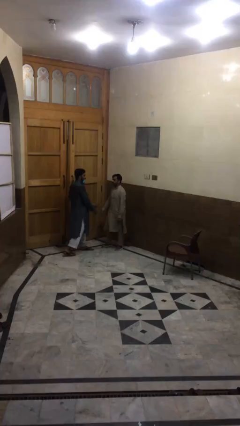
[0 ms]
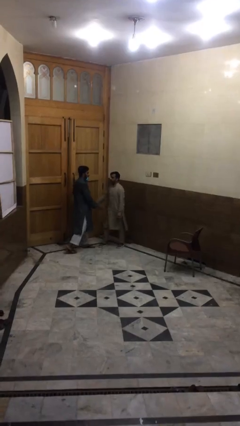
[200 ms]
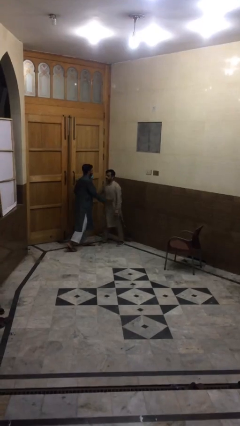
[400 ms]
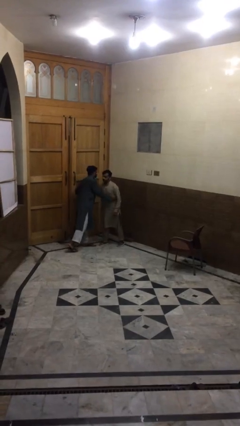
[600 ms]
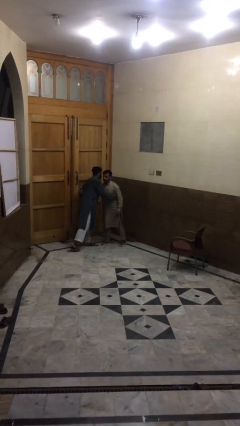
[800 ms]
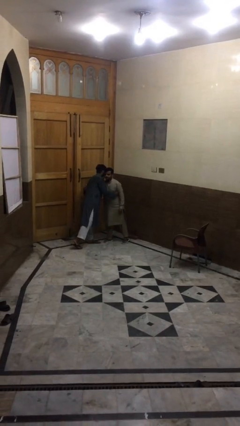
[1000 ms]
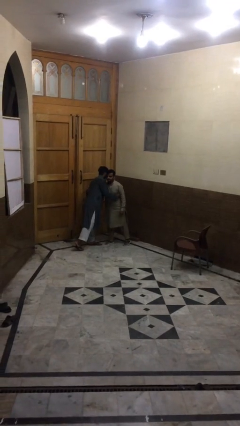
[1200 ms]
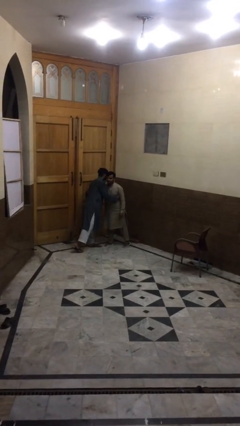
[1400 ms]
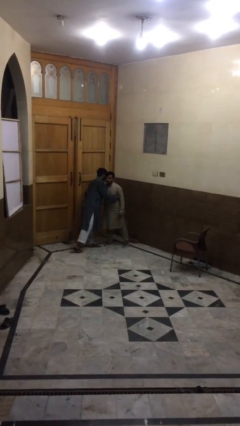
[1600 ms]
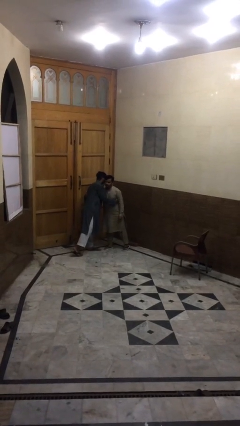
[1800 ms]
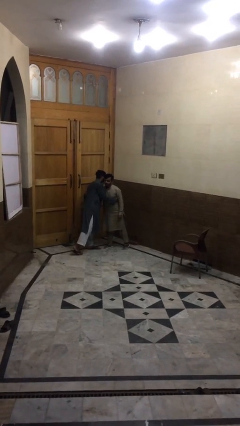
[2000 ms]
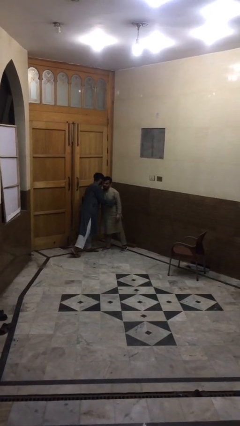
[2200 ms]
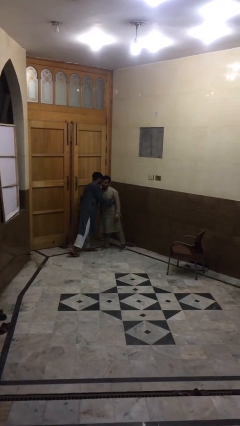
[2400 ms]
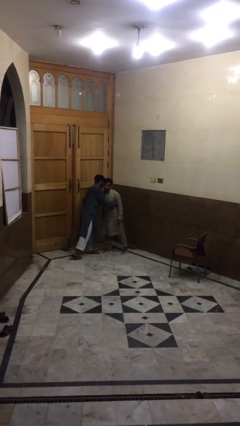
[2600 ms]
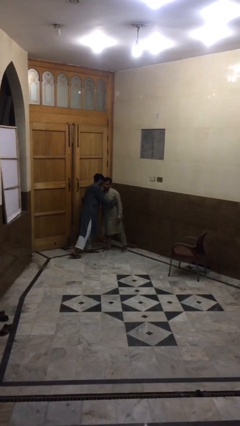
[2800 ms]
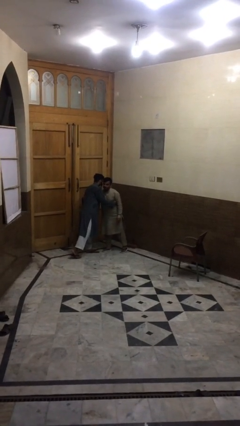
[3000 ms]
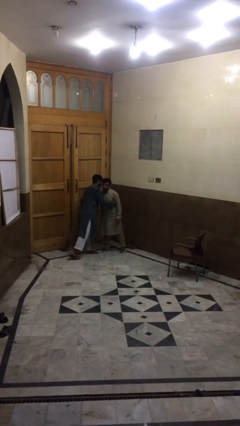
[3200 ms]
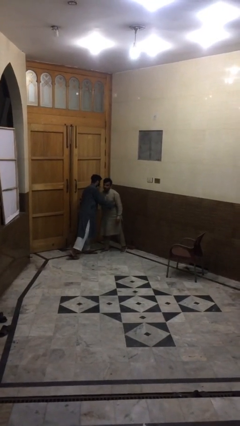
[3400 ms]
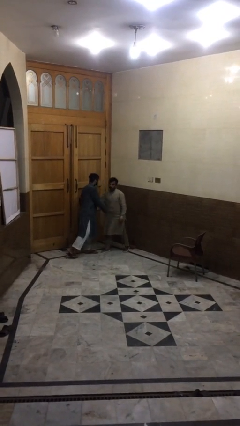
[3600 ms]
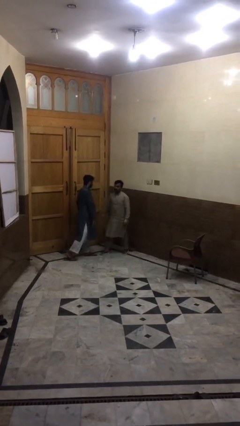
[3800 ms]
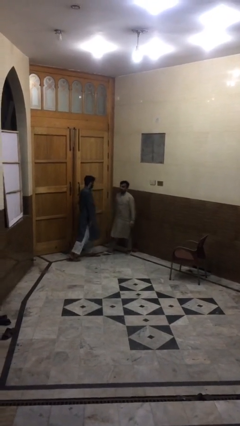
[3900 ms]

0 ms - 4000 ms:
person embraces person

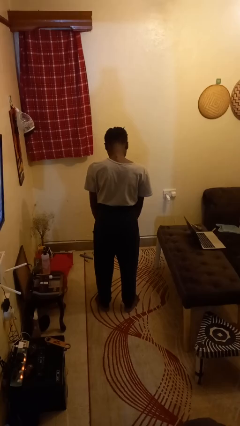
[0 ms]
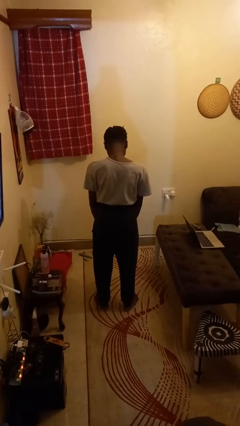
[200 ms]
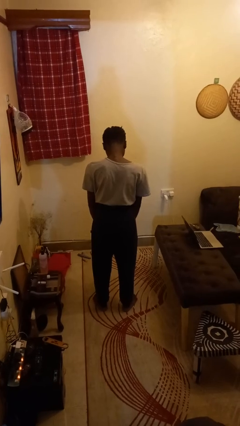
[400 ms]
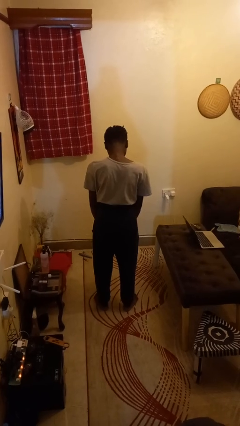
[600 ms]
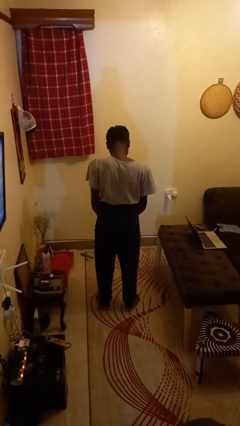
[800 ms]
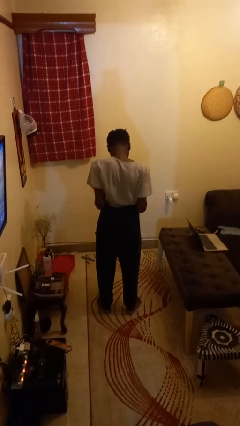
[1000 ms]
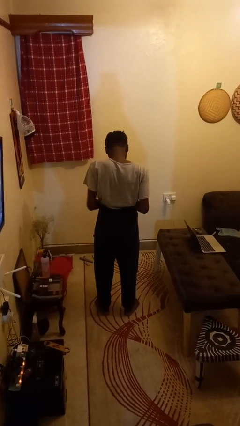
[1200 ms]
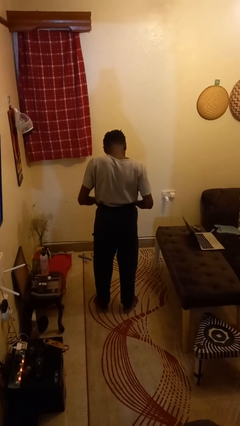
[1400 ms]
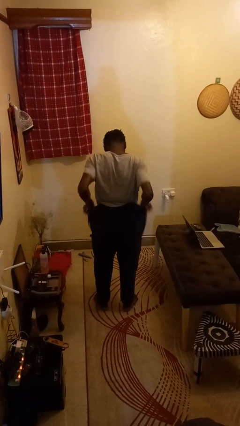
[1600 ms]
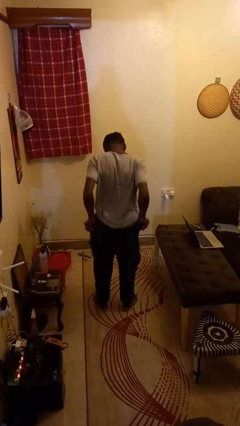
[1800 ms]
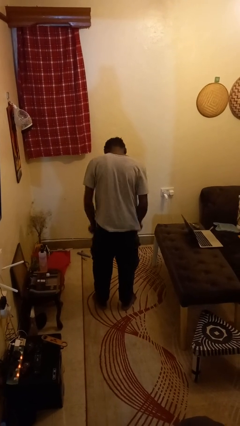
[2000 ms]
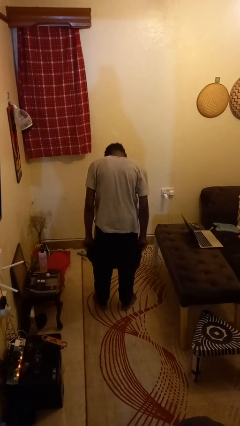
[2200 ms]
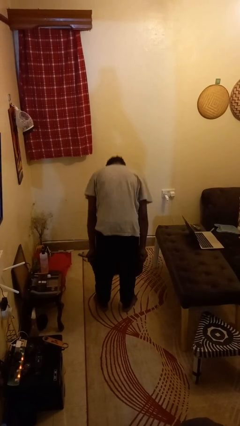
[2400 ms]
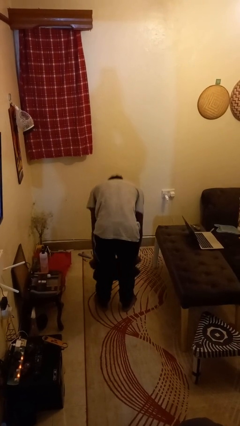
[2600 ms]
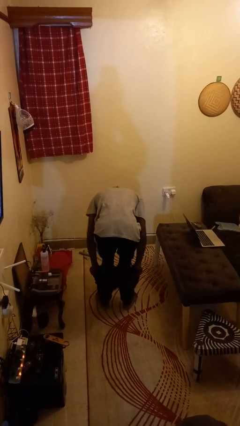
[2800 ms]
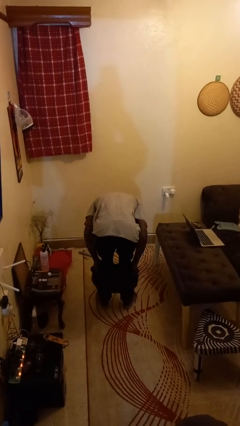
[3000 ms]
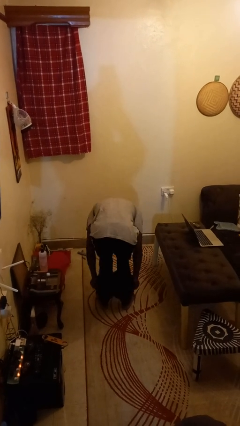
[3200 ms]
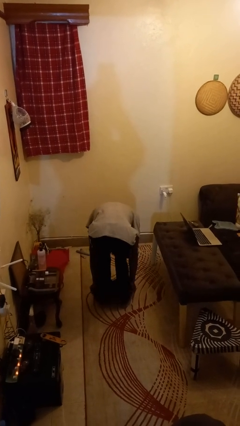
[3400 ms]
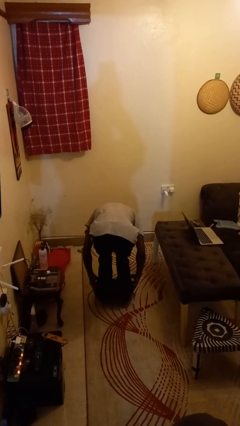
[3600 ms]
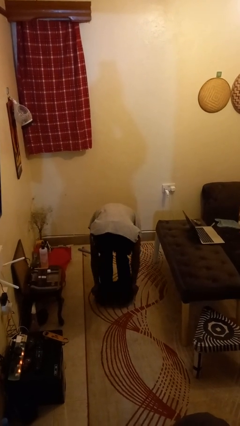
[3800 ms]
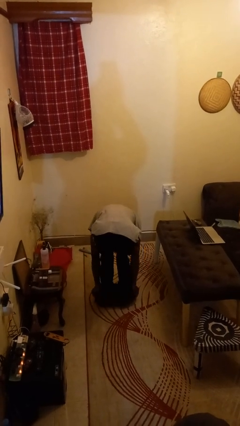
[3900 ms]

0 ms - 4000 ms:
person takes off pants

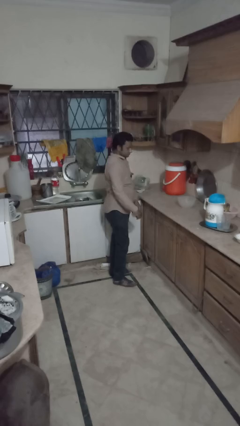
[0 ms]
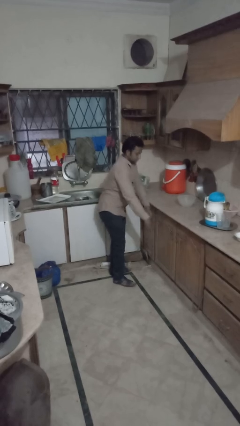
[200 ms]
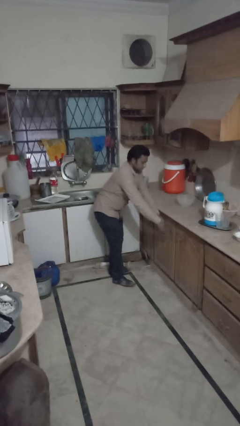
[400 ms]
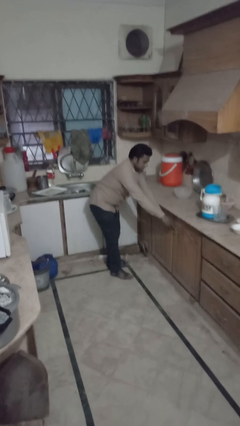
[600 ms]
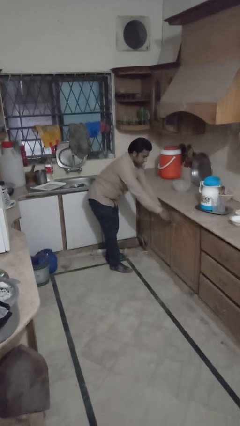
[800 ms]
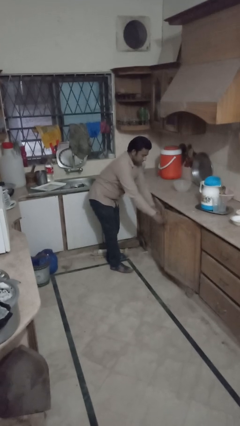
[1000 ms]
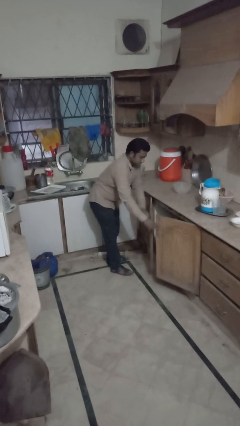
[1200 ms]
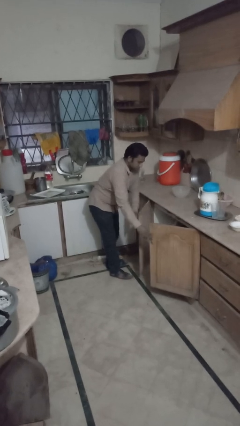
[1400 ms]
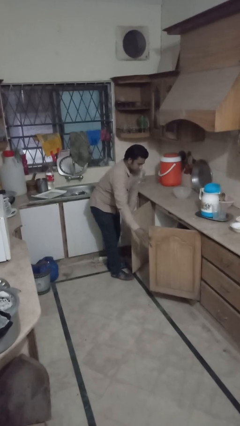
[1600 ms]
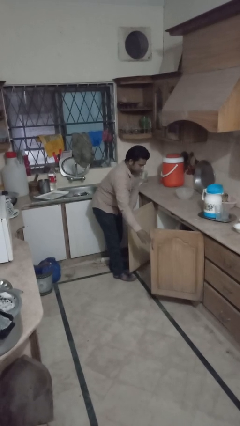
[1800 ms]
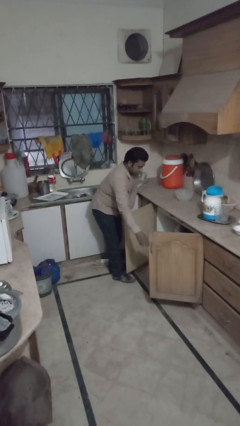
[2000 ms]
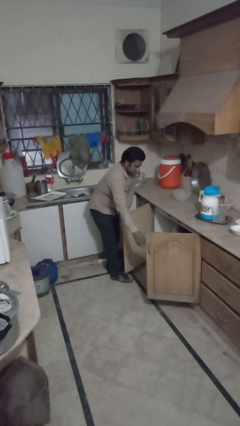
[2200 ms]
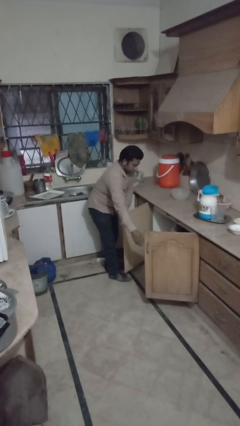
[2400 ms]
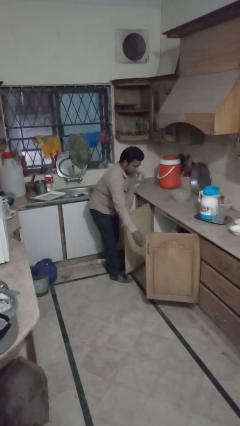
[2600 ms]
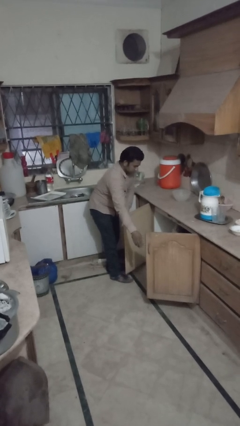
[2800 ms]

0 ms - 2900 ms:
person opens cabinet

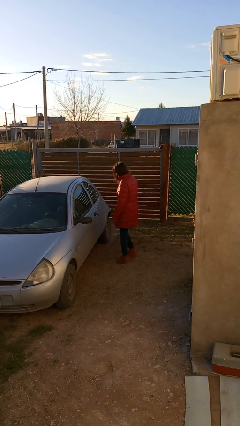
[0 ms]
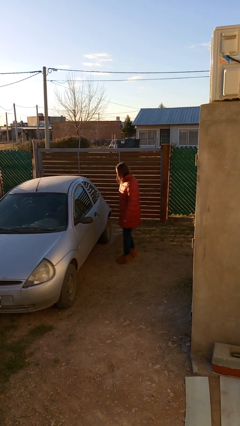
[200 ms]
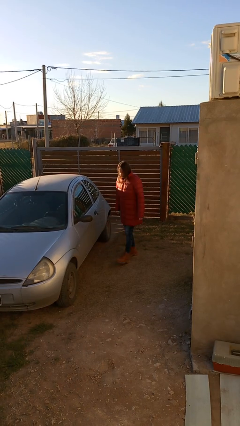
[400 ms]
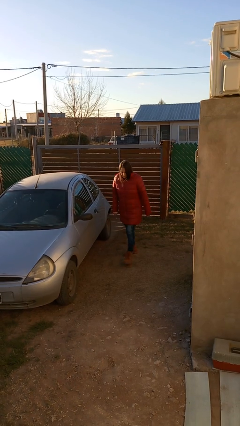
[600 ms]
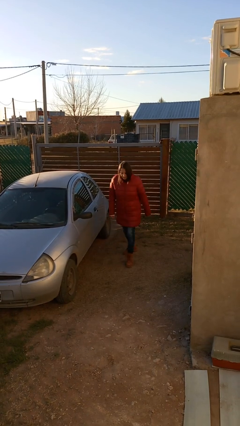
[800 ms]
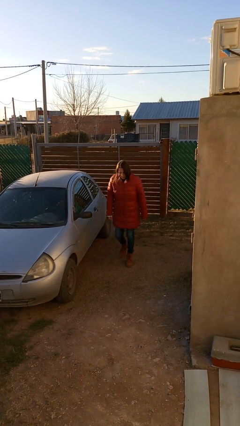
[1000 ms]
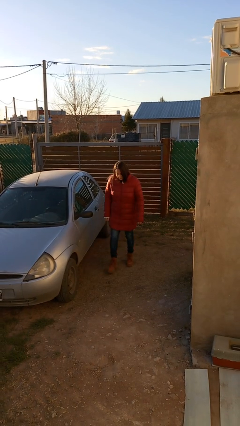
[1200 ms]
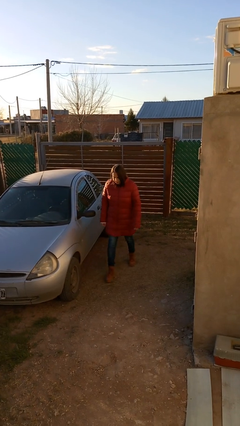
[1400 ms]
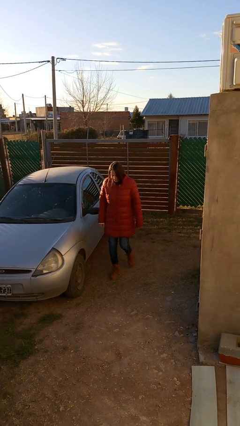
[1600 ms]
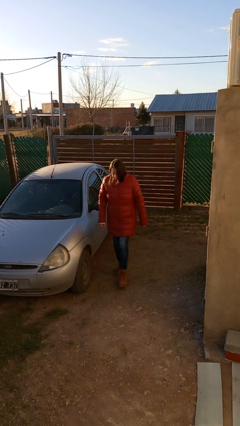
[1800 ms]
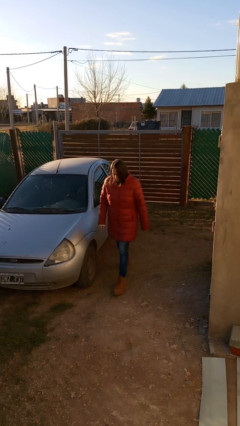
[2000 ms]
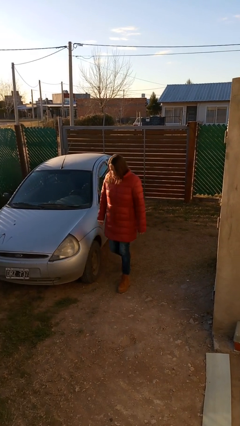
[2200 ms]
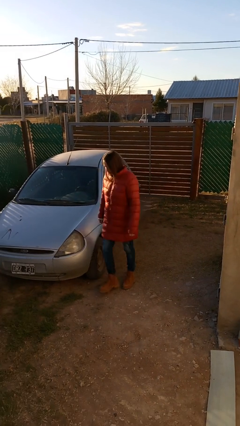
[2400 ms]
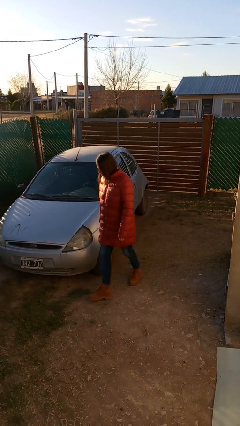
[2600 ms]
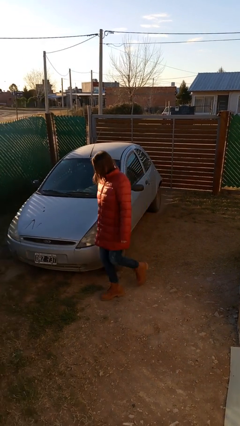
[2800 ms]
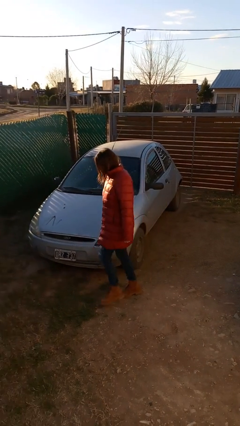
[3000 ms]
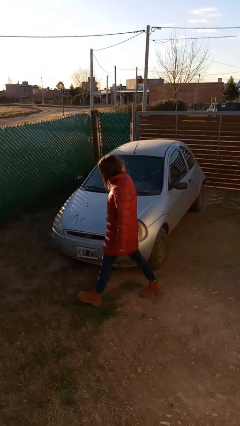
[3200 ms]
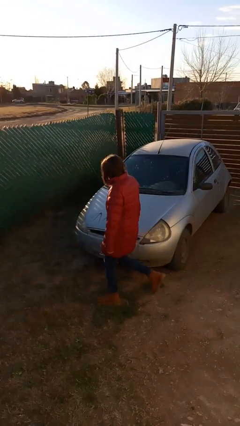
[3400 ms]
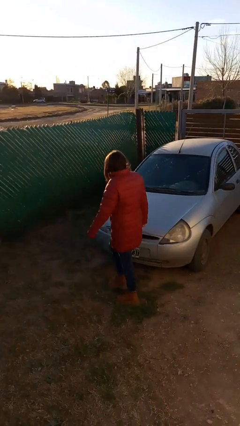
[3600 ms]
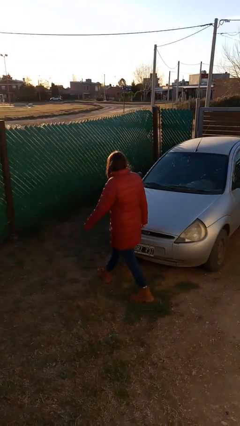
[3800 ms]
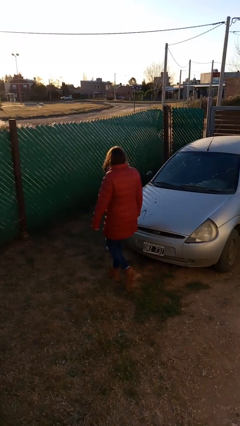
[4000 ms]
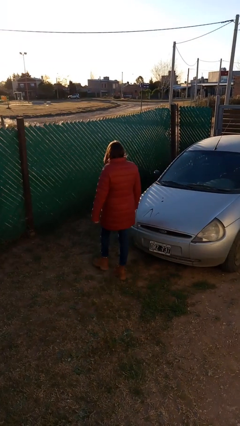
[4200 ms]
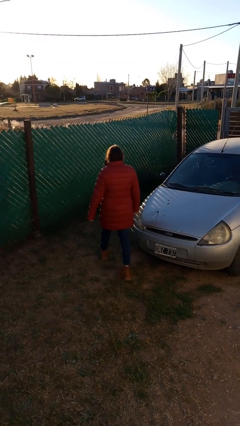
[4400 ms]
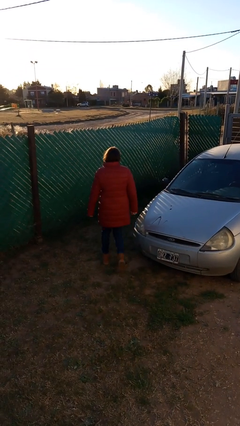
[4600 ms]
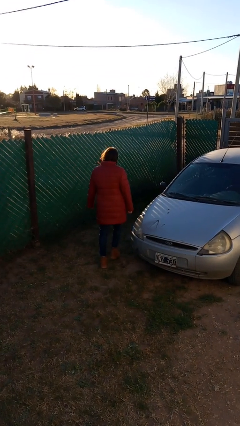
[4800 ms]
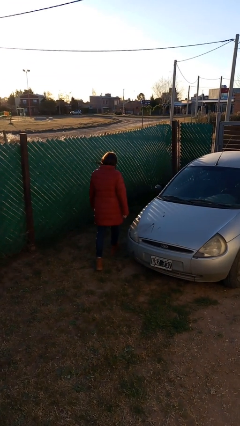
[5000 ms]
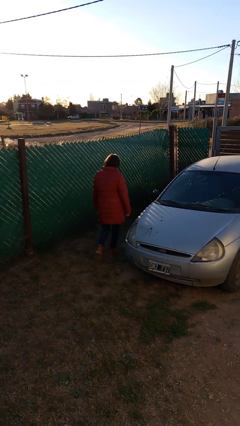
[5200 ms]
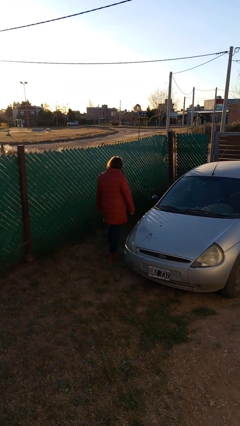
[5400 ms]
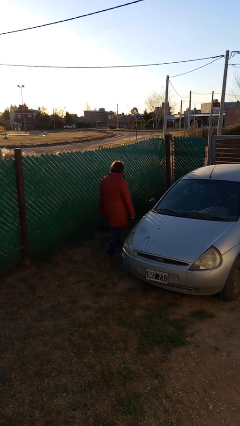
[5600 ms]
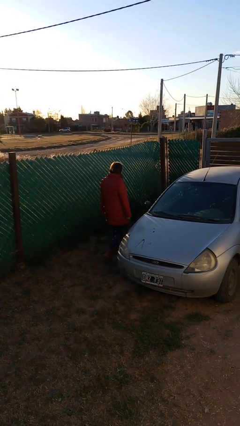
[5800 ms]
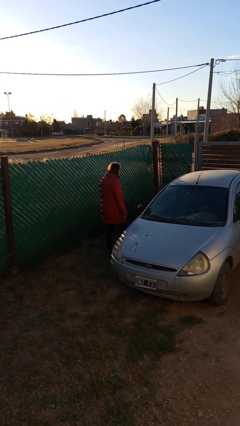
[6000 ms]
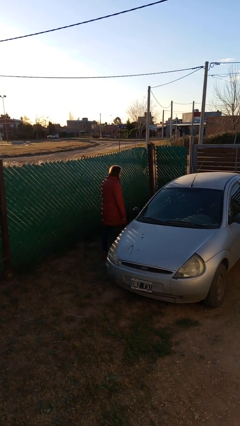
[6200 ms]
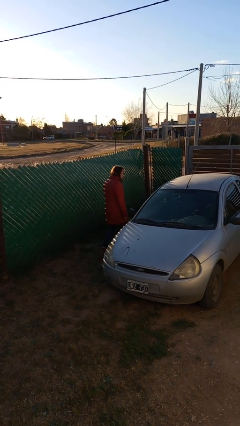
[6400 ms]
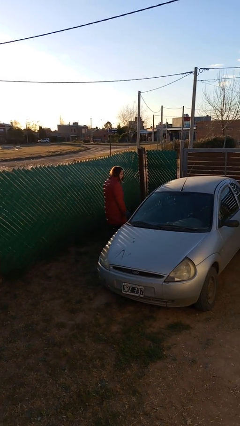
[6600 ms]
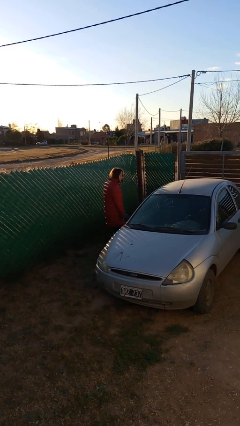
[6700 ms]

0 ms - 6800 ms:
person walks around car
